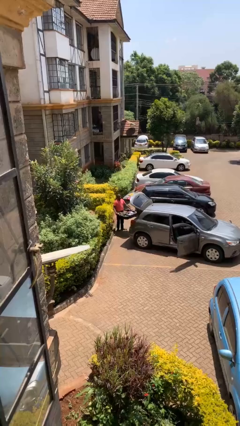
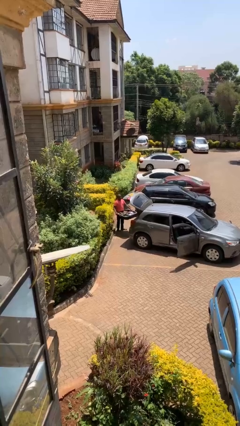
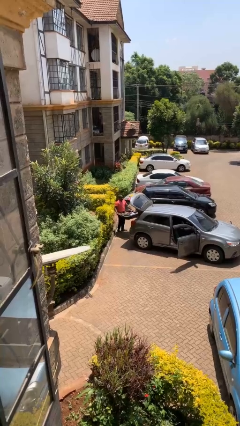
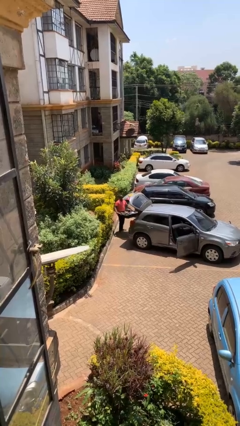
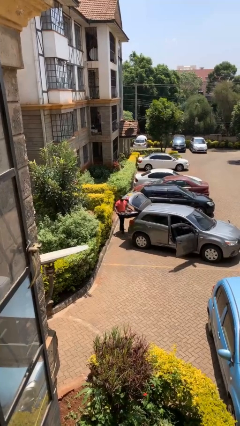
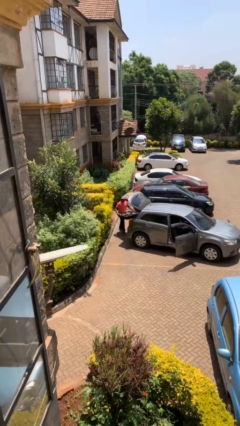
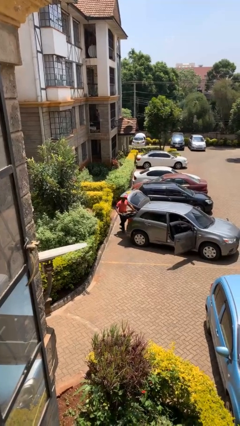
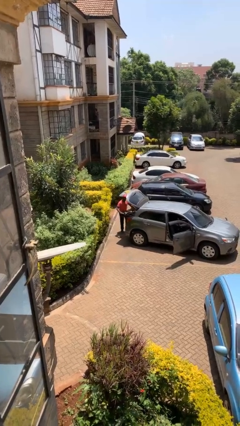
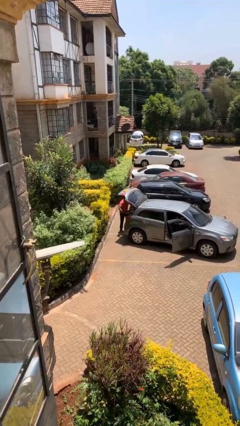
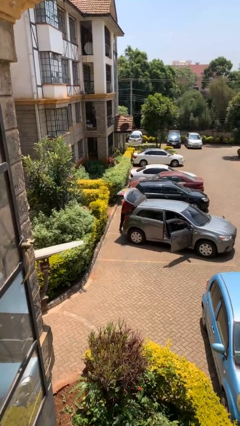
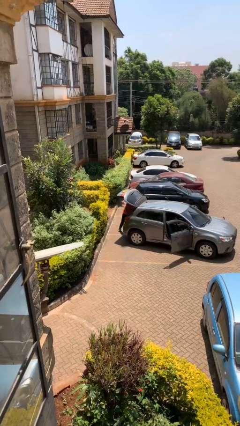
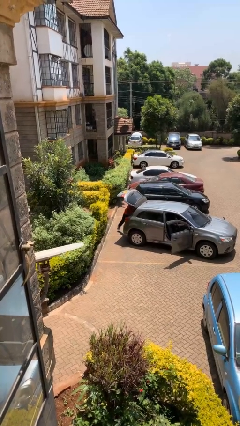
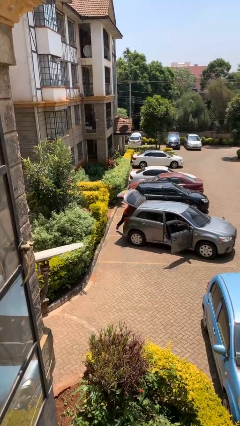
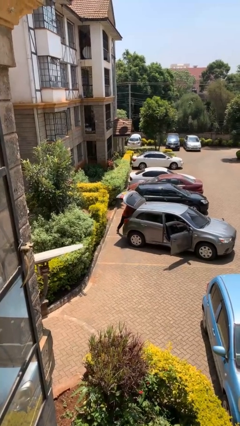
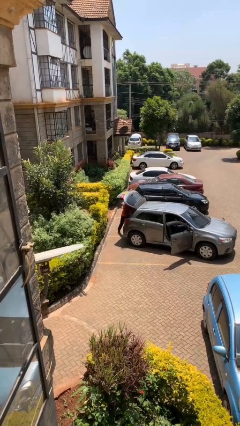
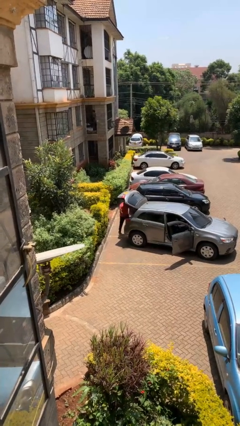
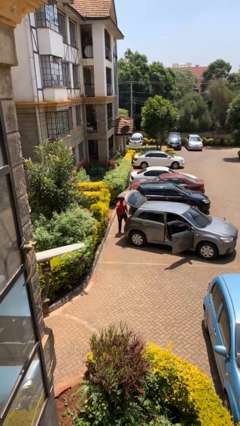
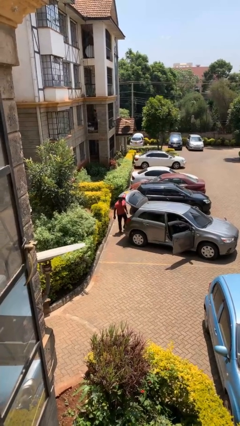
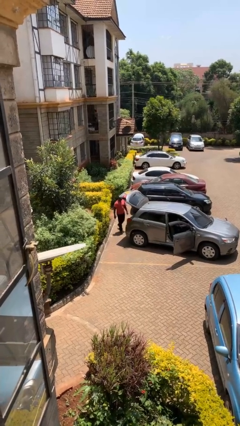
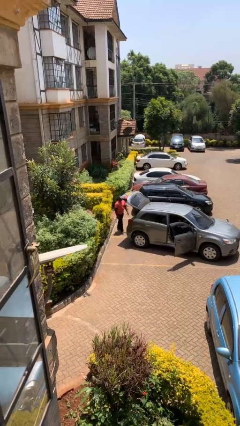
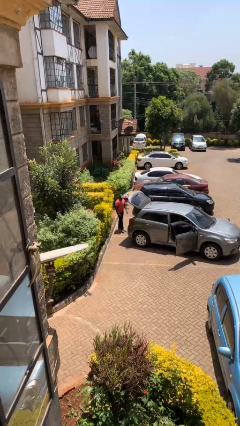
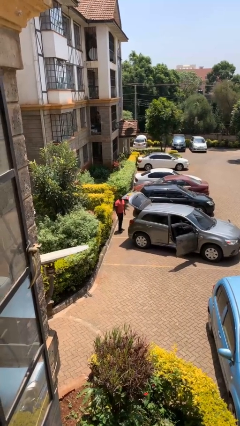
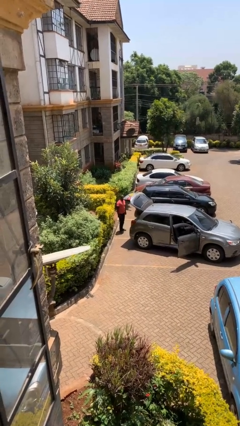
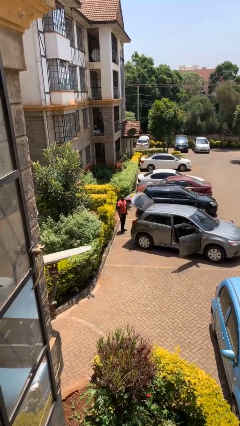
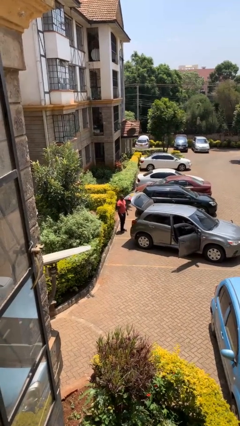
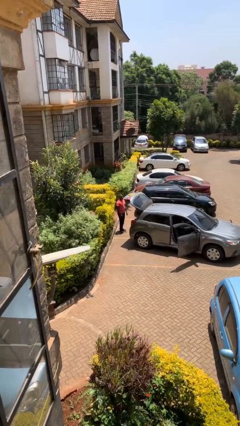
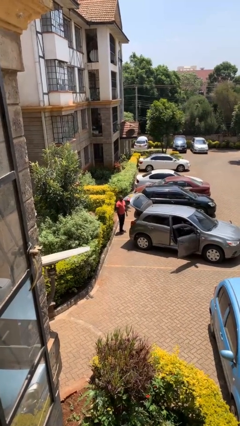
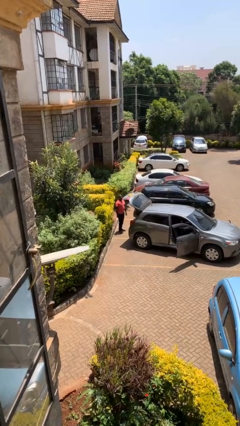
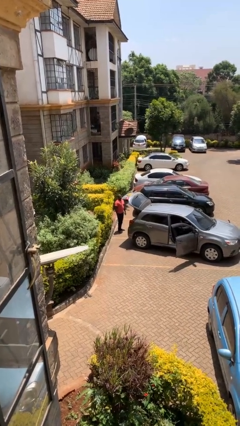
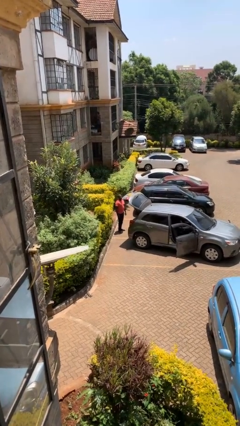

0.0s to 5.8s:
person loads car

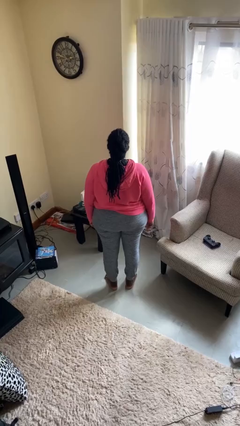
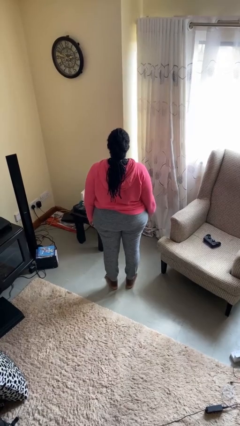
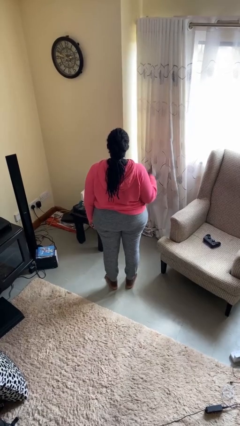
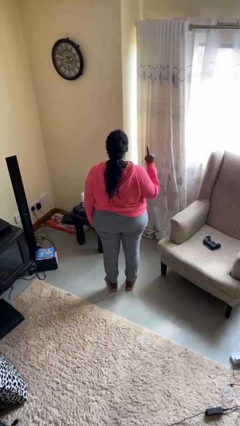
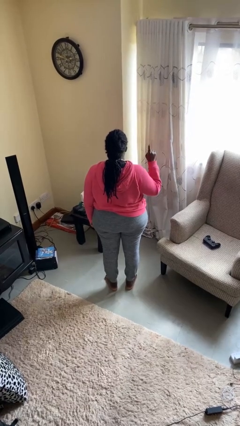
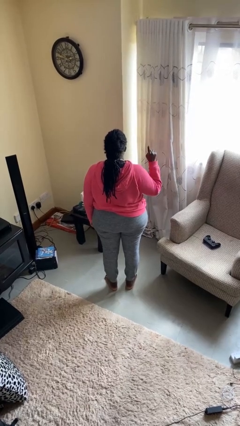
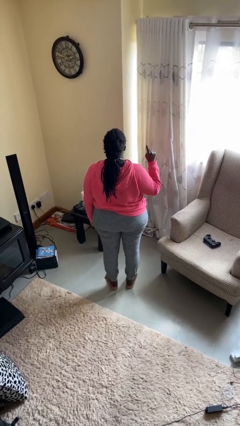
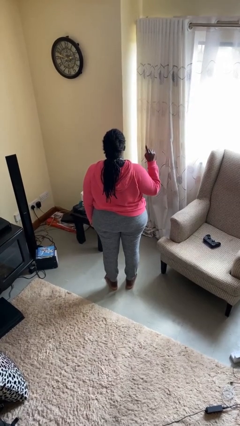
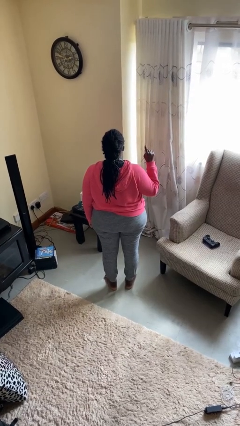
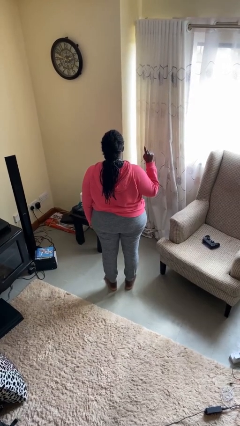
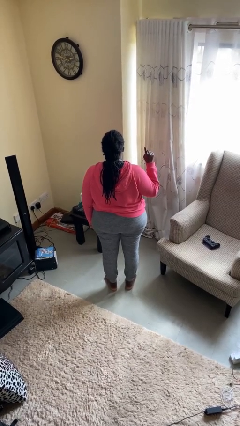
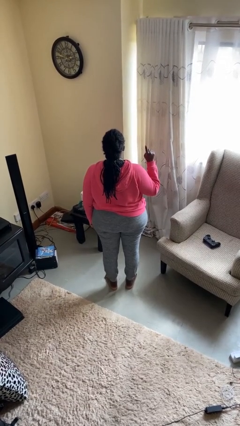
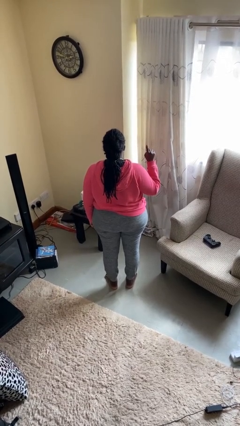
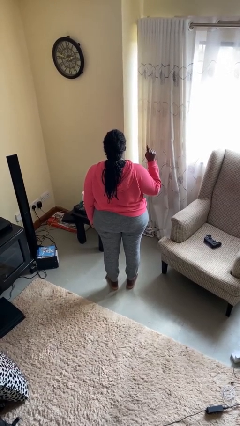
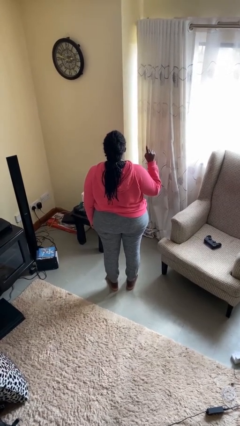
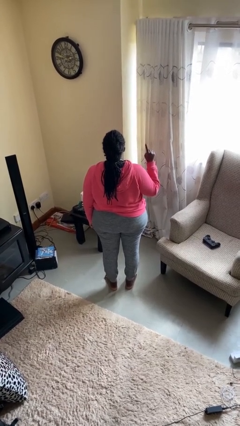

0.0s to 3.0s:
person gestures number one

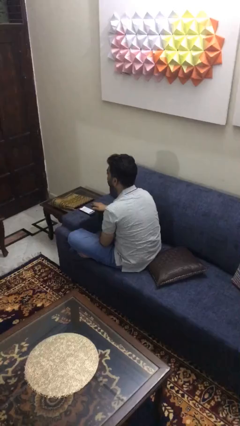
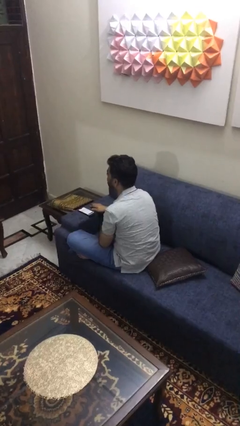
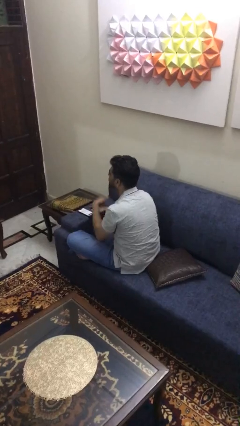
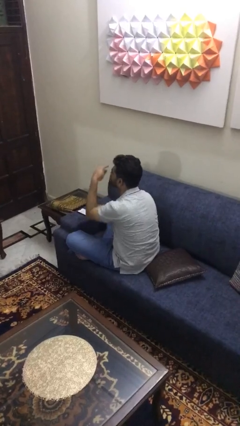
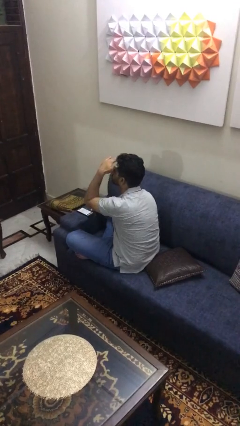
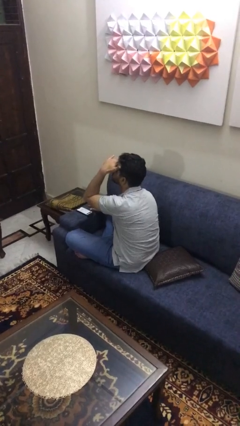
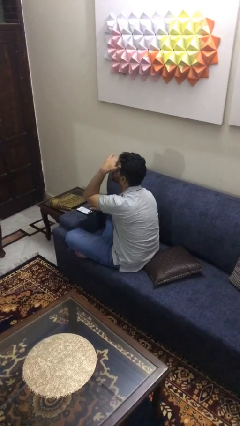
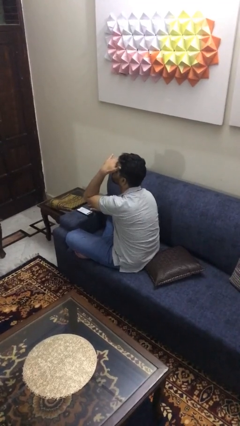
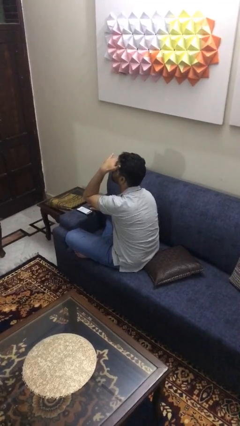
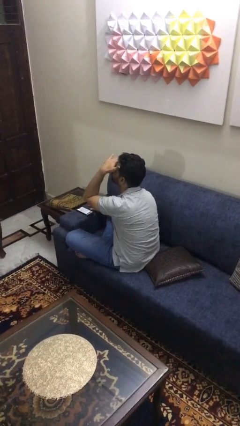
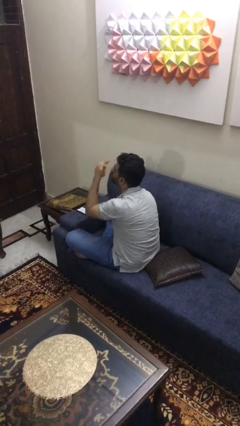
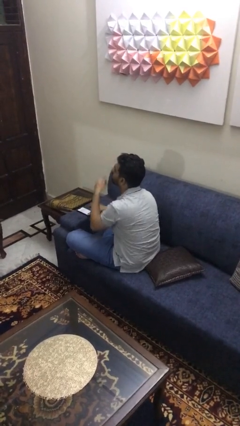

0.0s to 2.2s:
person shades eyes

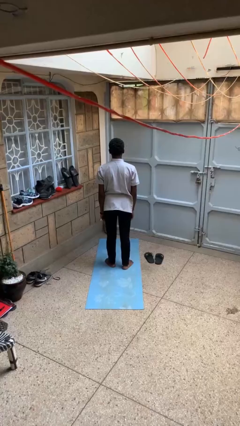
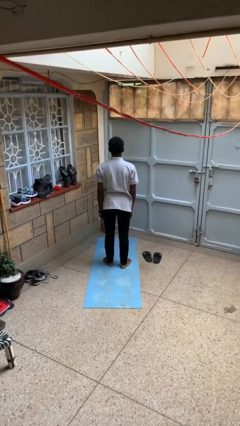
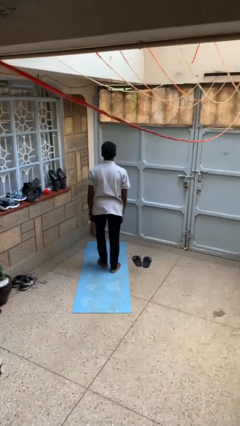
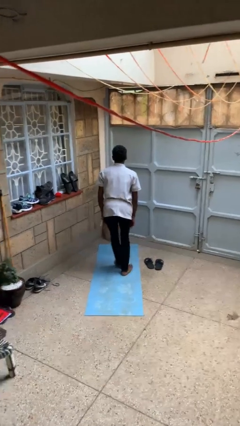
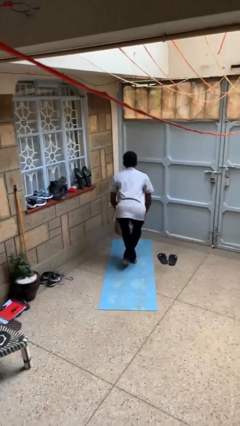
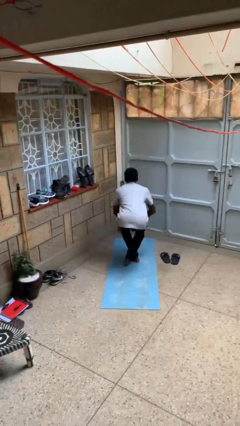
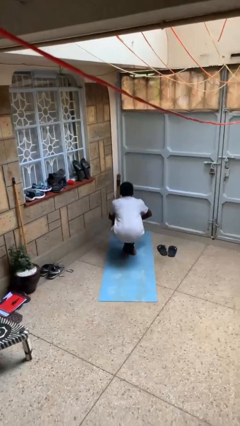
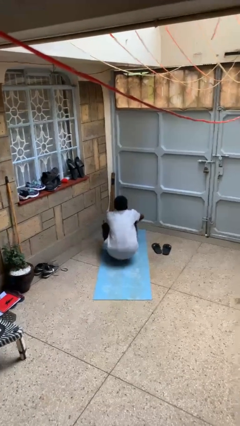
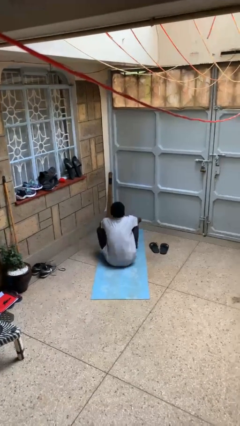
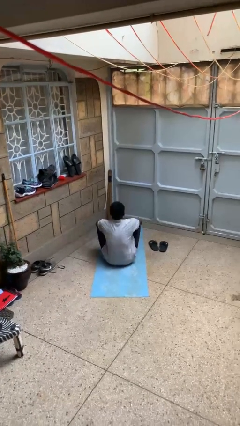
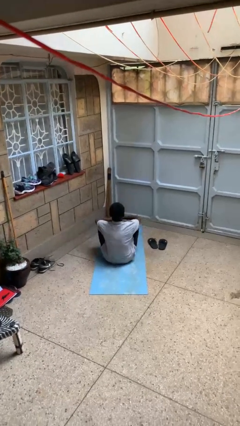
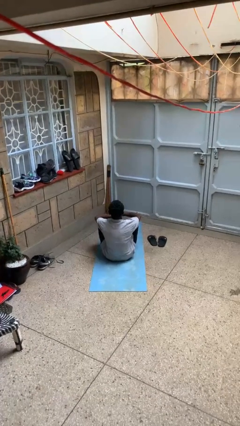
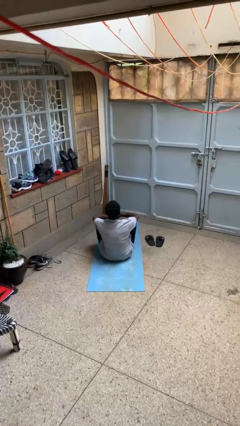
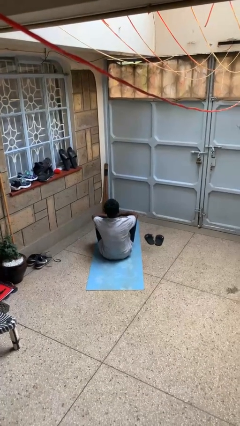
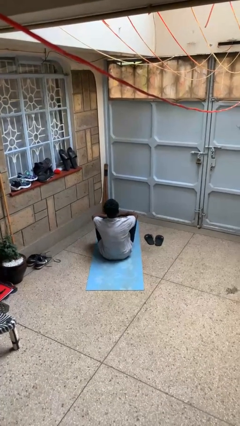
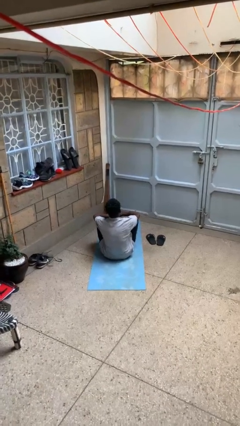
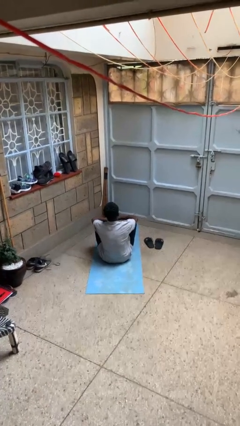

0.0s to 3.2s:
person sits crisscross

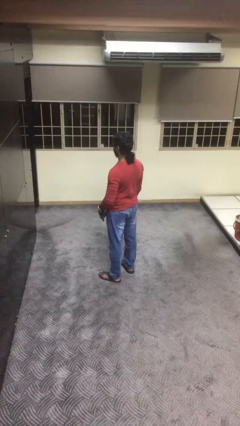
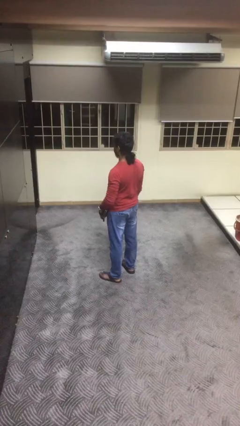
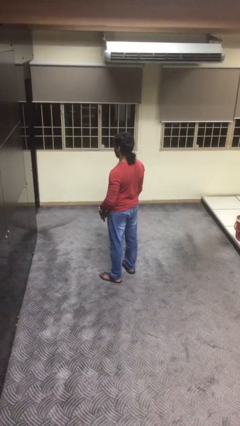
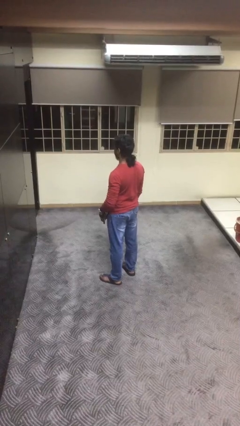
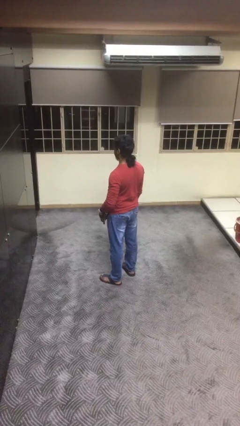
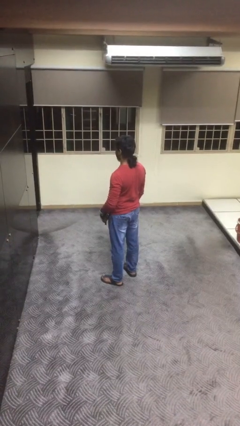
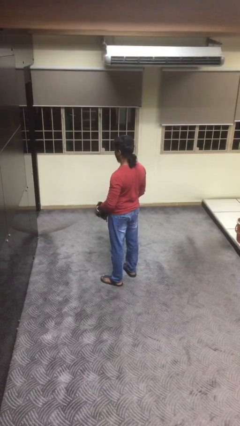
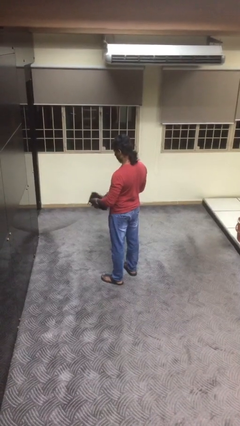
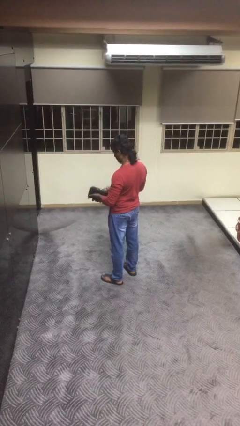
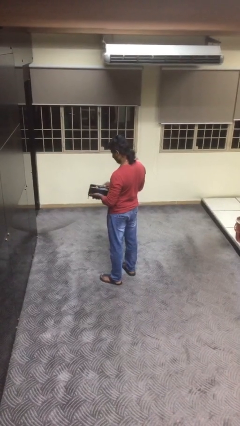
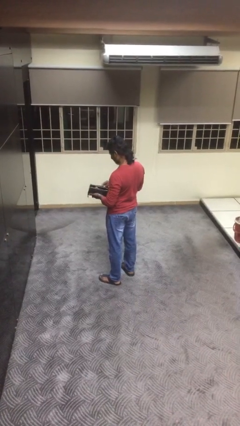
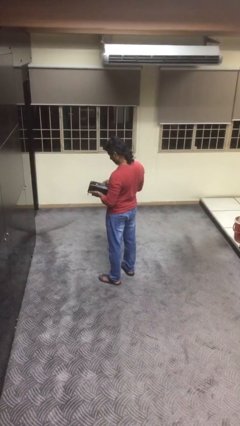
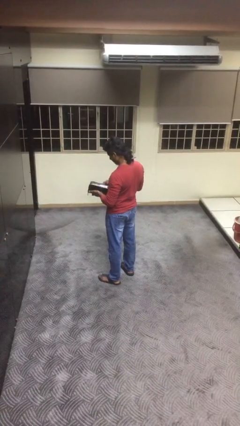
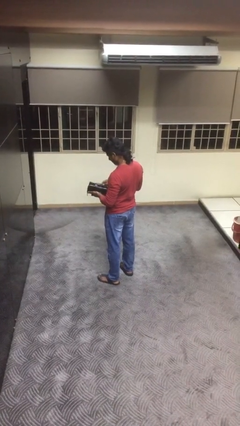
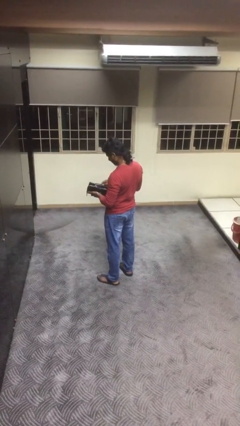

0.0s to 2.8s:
person searches in purse

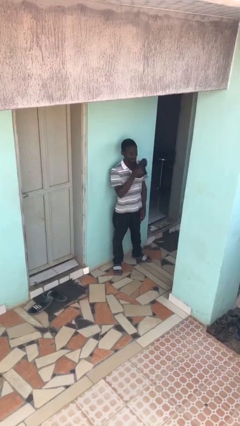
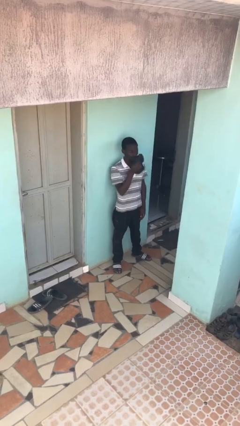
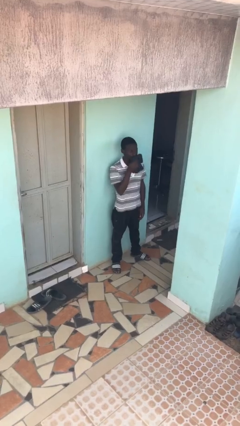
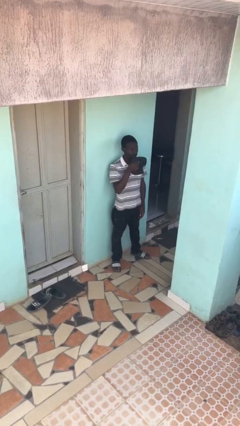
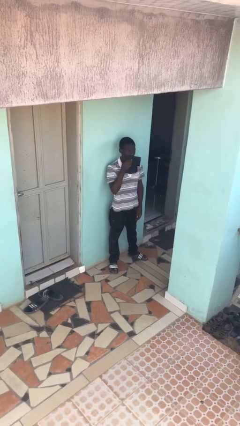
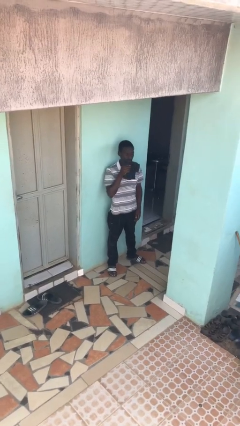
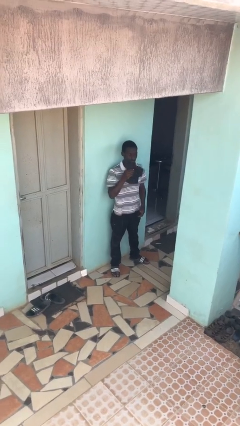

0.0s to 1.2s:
person wipes mouth with napkin
